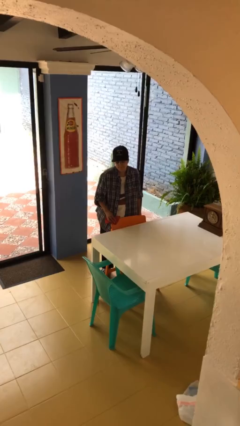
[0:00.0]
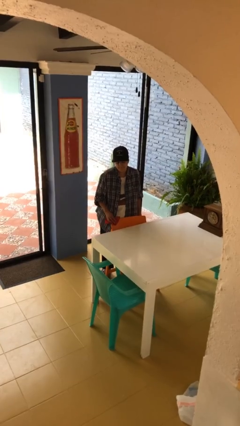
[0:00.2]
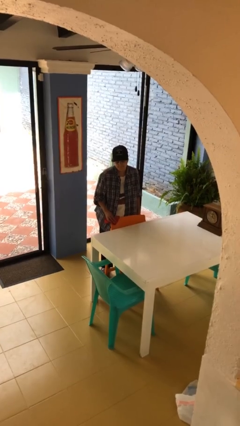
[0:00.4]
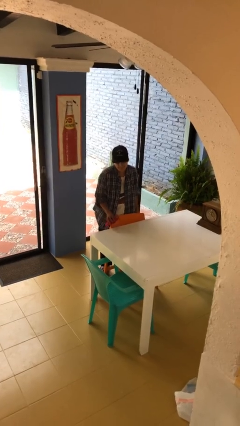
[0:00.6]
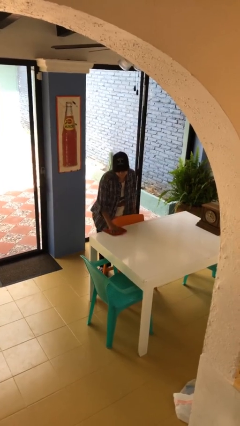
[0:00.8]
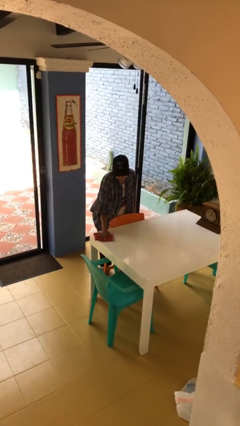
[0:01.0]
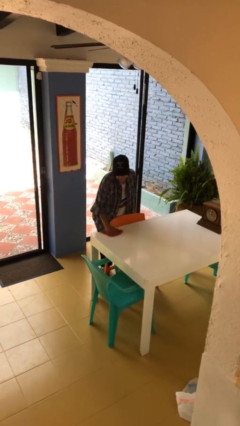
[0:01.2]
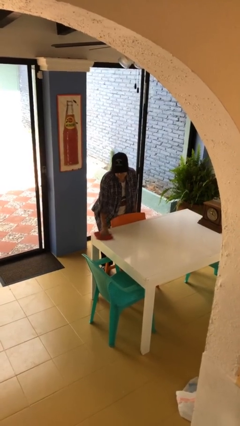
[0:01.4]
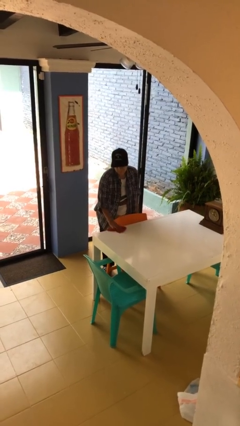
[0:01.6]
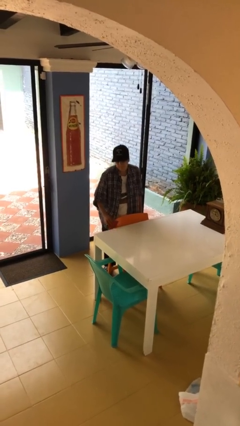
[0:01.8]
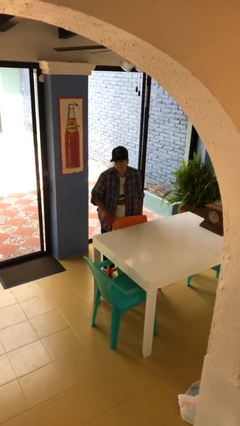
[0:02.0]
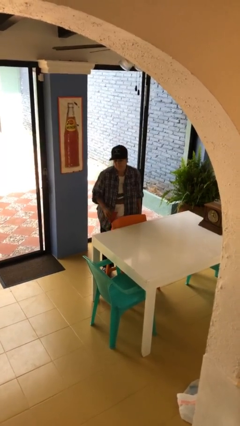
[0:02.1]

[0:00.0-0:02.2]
person cleans table with rag

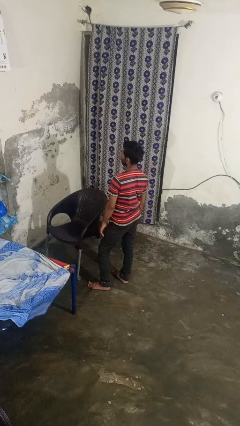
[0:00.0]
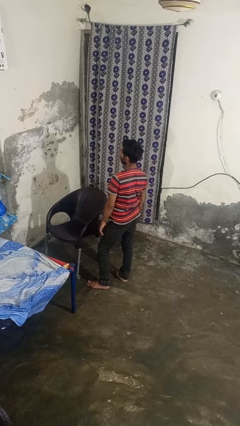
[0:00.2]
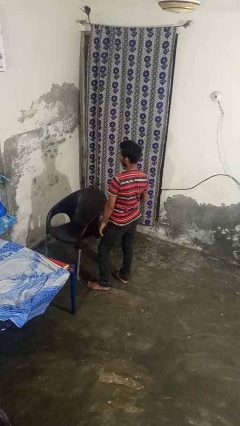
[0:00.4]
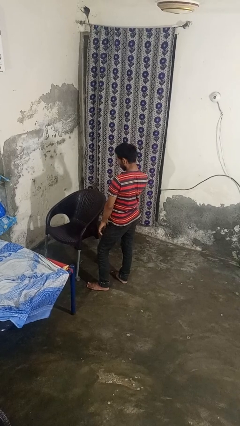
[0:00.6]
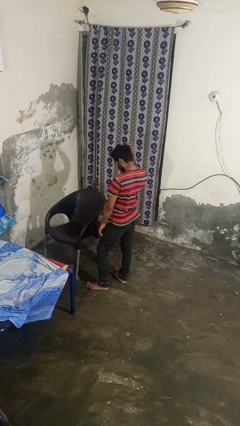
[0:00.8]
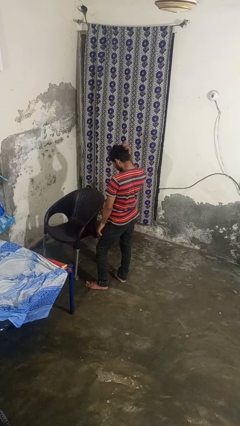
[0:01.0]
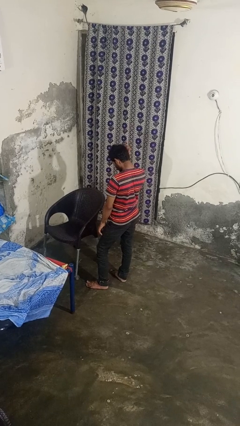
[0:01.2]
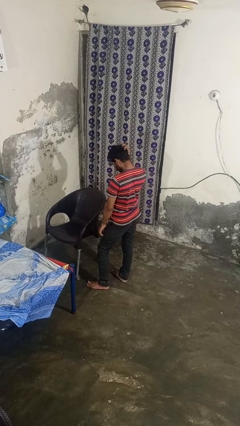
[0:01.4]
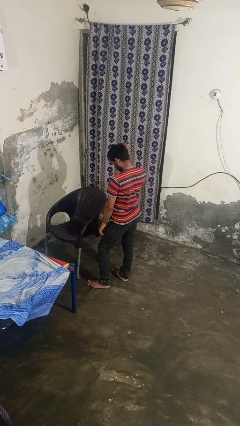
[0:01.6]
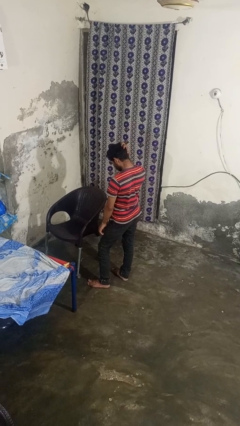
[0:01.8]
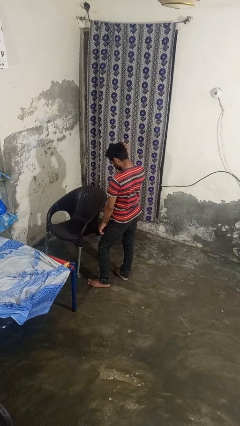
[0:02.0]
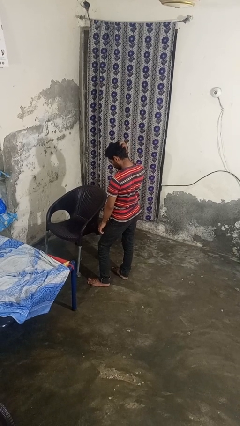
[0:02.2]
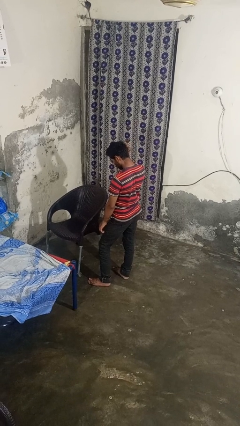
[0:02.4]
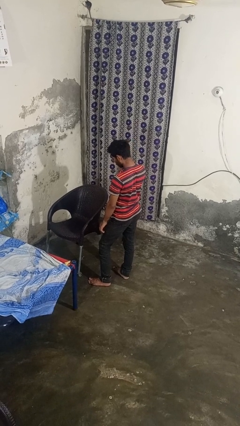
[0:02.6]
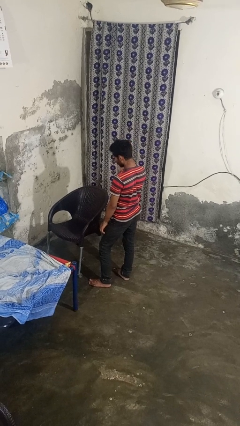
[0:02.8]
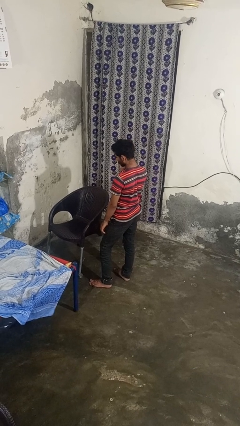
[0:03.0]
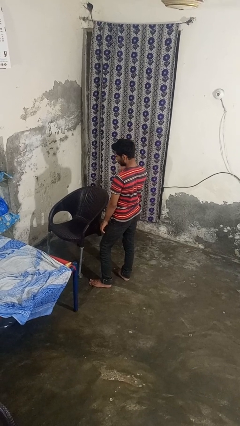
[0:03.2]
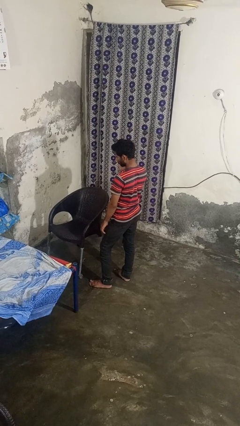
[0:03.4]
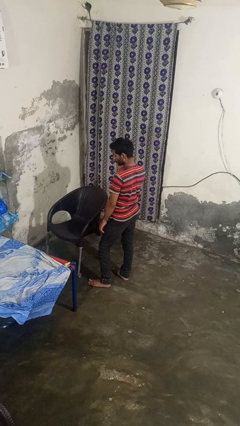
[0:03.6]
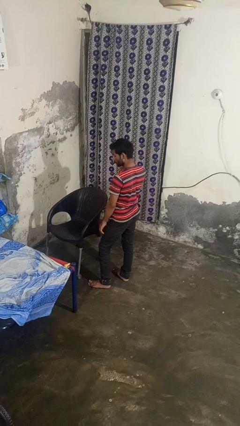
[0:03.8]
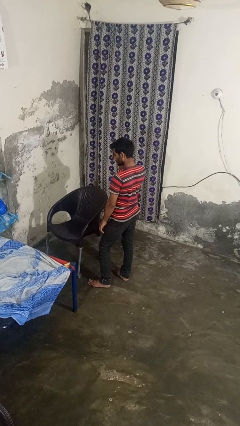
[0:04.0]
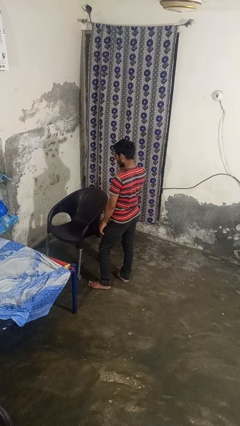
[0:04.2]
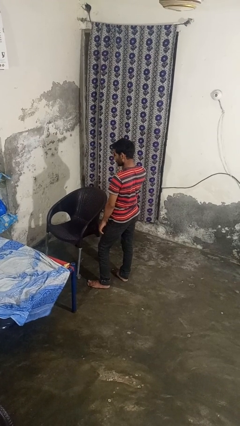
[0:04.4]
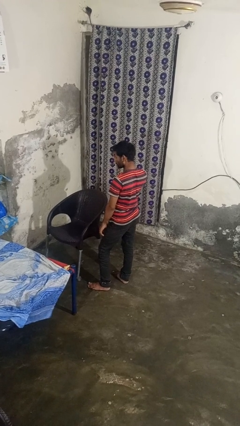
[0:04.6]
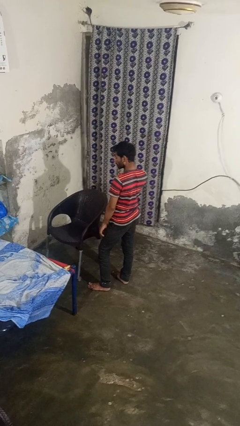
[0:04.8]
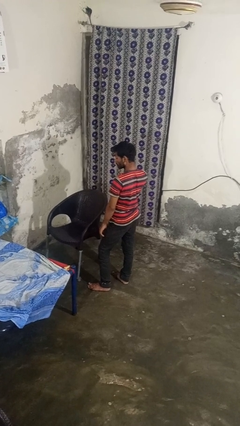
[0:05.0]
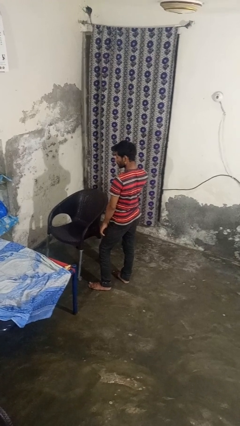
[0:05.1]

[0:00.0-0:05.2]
person scratches face

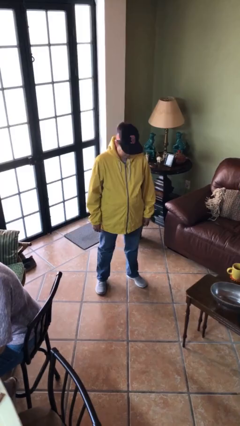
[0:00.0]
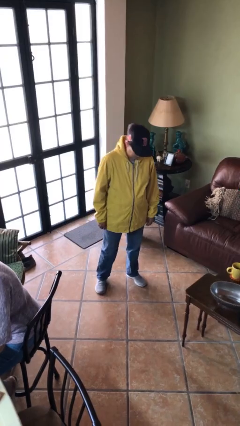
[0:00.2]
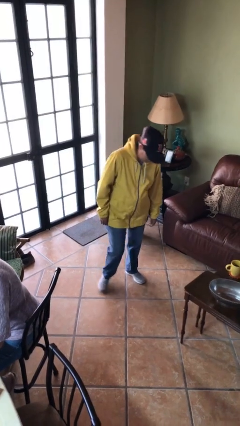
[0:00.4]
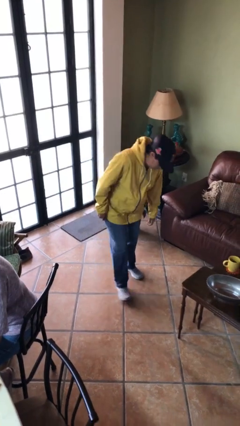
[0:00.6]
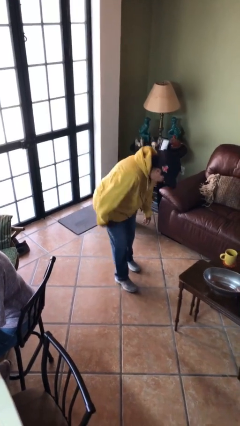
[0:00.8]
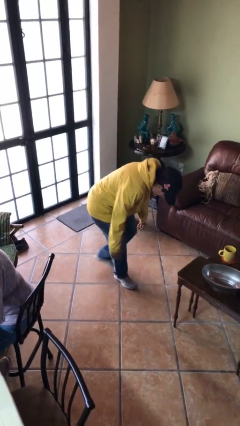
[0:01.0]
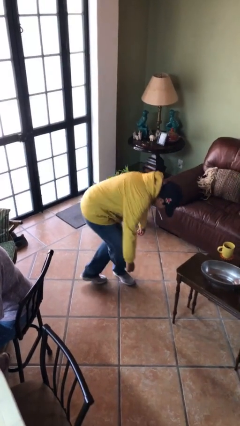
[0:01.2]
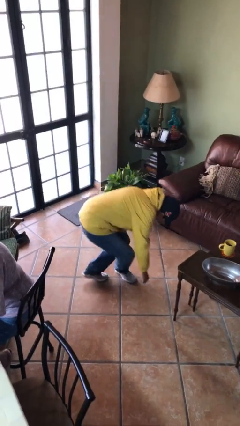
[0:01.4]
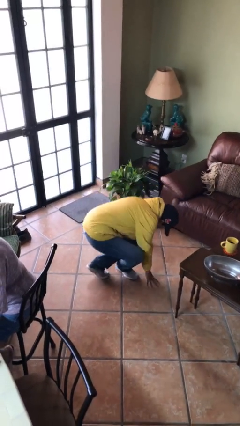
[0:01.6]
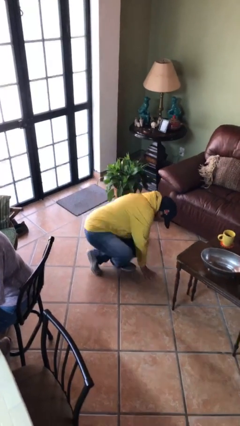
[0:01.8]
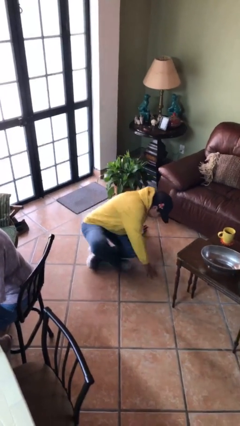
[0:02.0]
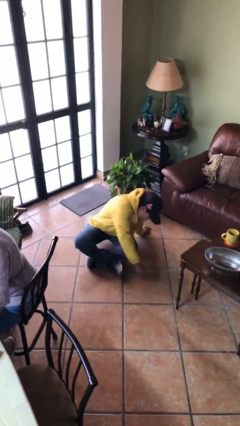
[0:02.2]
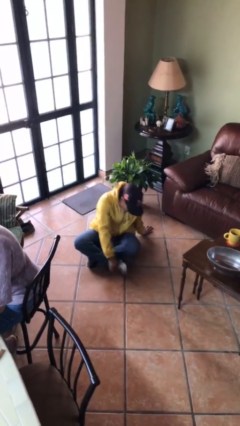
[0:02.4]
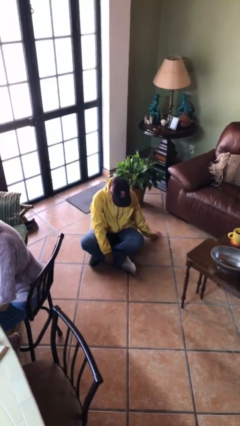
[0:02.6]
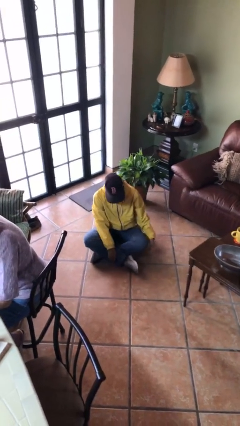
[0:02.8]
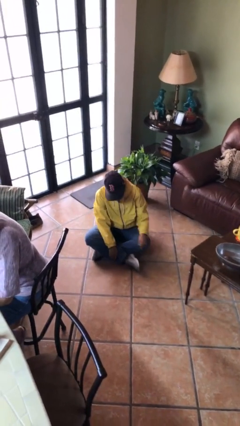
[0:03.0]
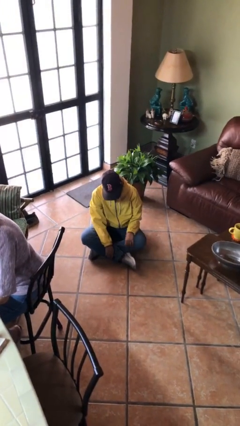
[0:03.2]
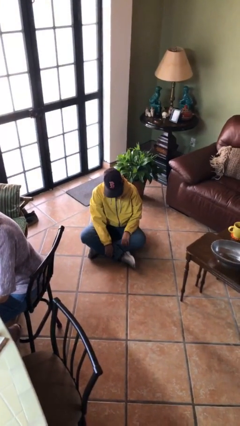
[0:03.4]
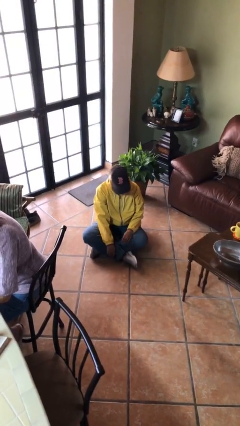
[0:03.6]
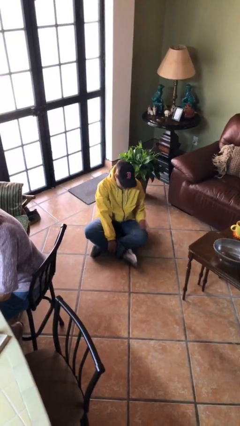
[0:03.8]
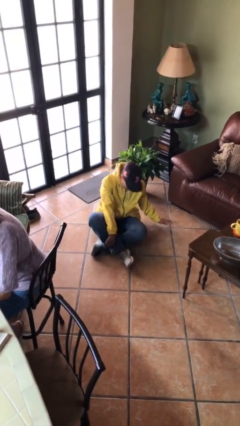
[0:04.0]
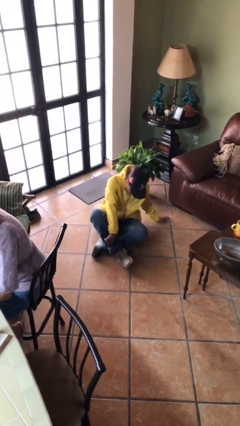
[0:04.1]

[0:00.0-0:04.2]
person sits crisscross

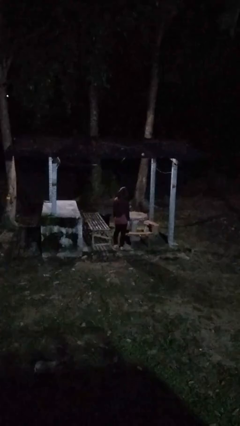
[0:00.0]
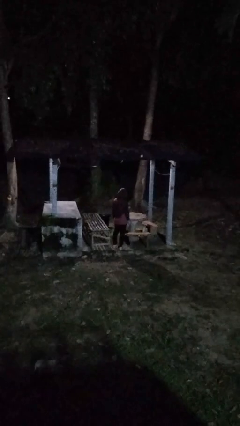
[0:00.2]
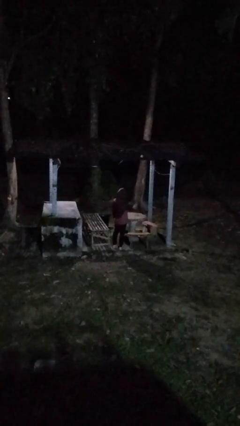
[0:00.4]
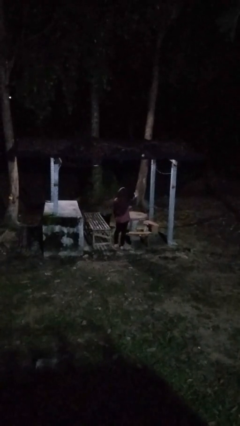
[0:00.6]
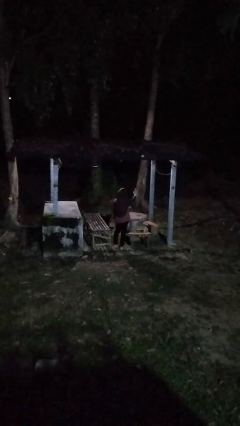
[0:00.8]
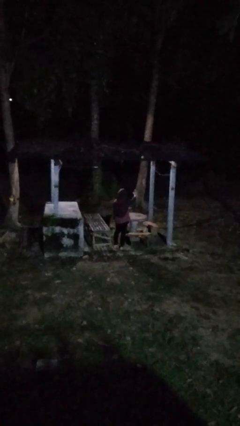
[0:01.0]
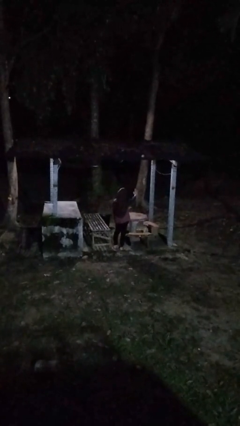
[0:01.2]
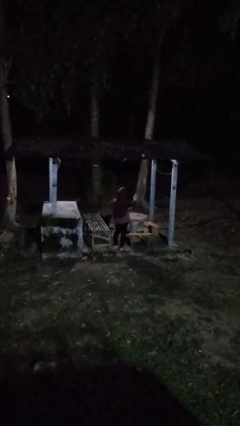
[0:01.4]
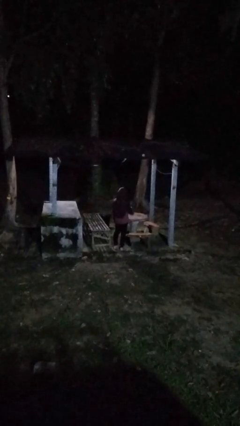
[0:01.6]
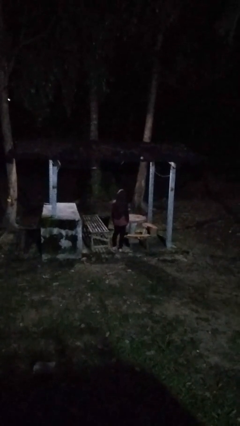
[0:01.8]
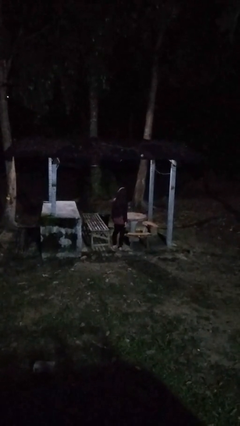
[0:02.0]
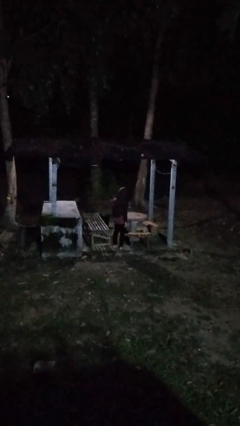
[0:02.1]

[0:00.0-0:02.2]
person gestures stop

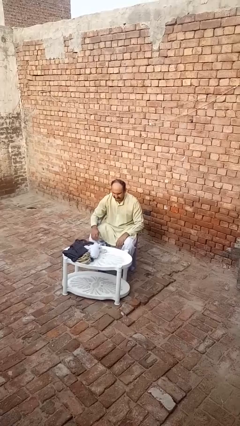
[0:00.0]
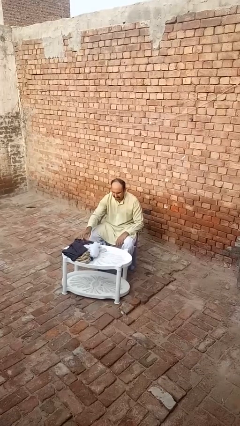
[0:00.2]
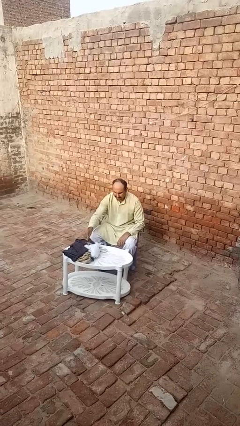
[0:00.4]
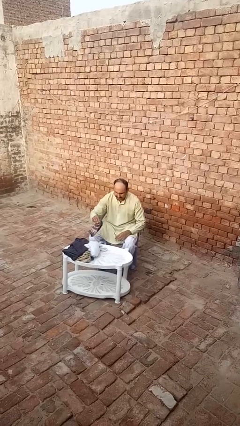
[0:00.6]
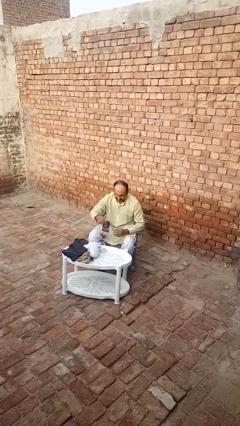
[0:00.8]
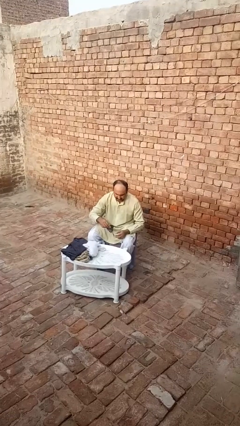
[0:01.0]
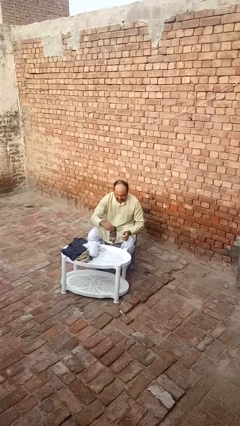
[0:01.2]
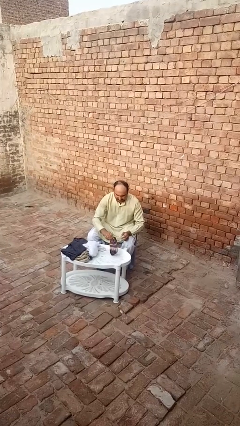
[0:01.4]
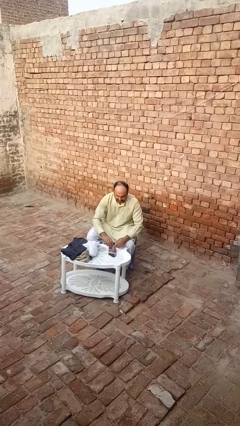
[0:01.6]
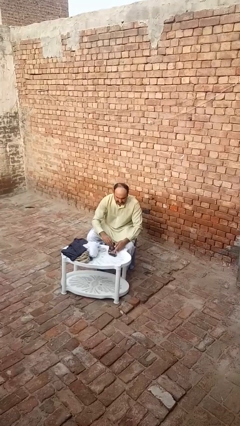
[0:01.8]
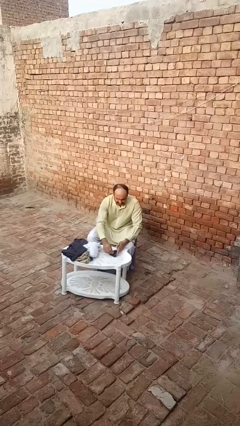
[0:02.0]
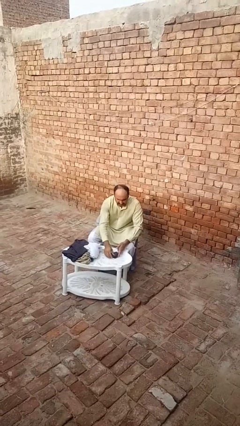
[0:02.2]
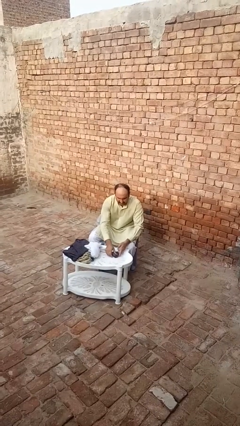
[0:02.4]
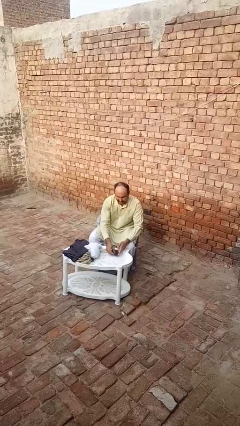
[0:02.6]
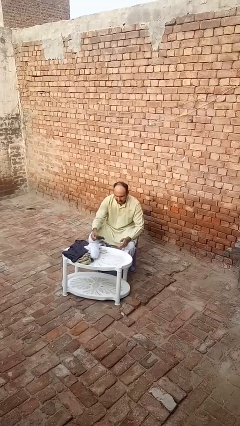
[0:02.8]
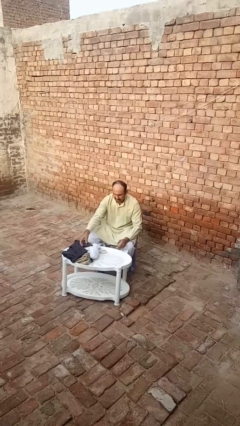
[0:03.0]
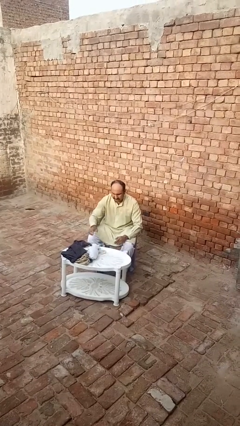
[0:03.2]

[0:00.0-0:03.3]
person folds socks

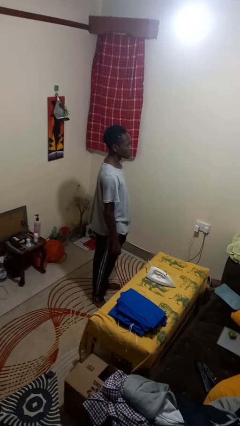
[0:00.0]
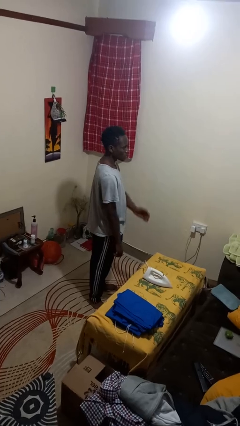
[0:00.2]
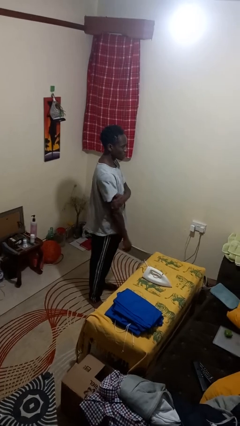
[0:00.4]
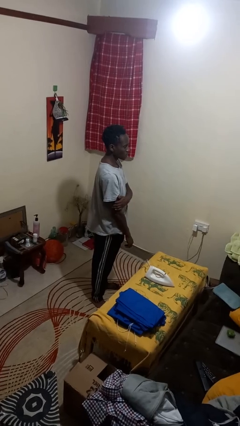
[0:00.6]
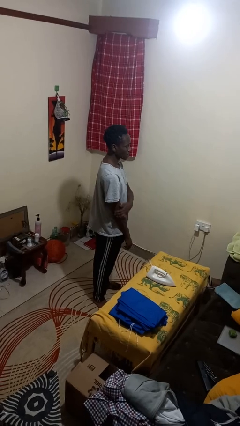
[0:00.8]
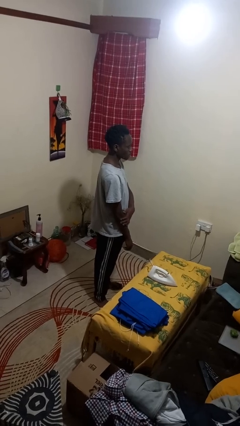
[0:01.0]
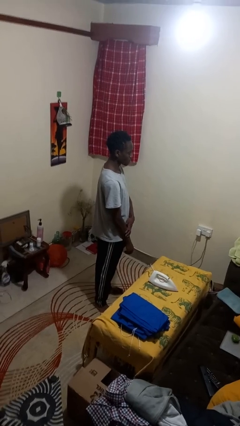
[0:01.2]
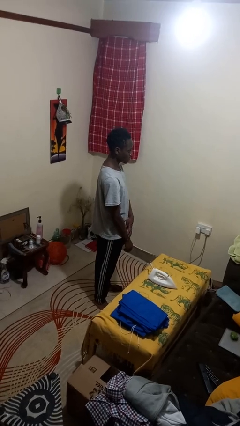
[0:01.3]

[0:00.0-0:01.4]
person swats bug
